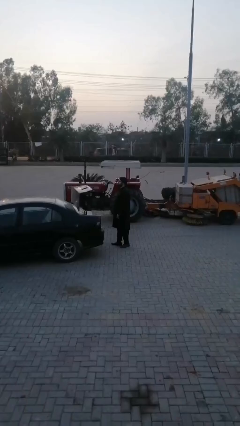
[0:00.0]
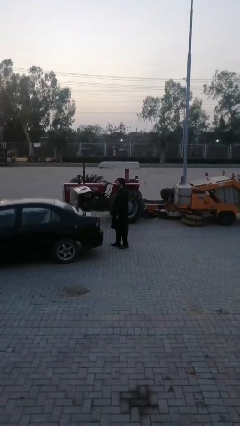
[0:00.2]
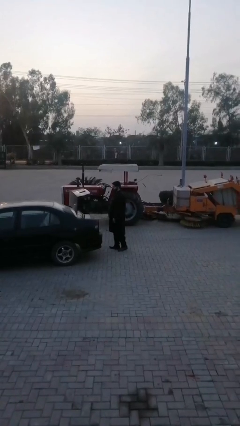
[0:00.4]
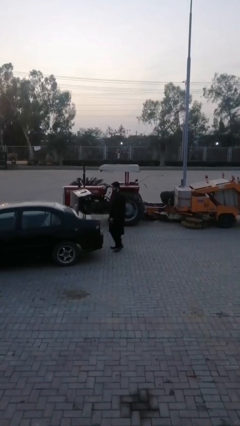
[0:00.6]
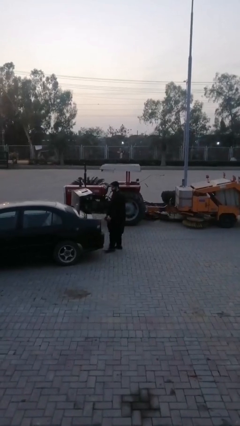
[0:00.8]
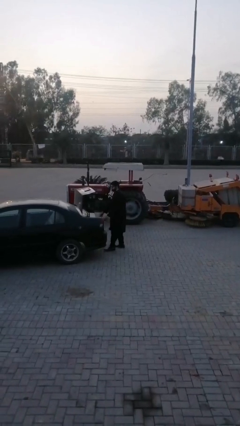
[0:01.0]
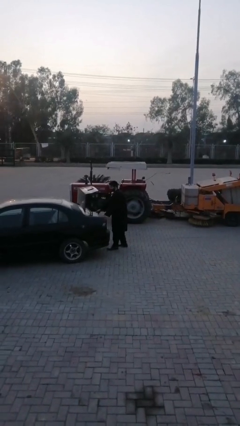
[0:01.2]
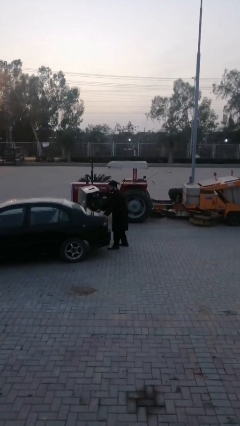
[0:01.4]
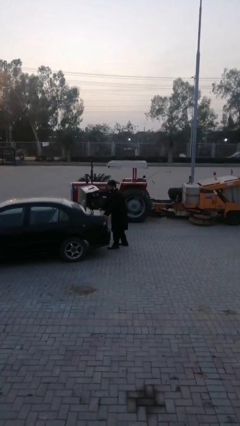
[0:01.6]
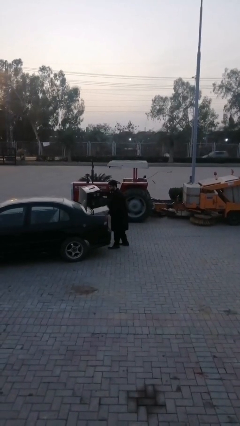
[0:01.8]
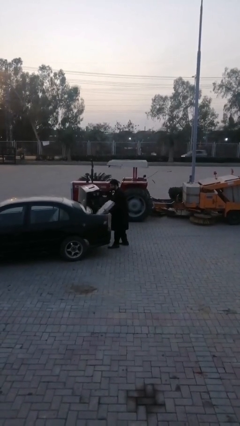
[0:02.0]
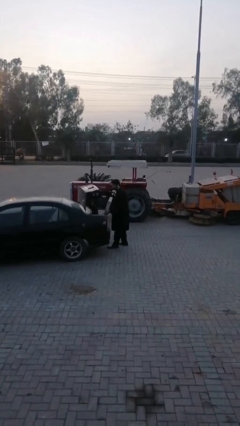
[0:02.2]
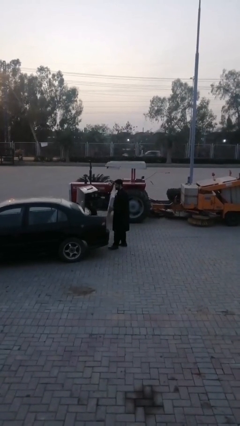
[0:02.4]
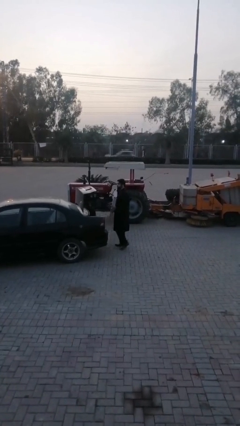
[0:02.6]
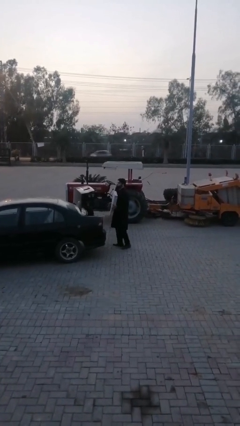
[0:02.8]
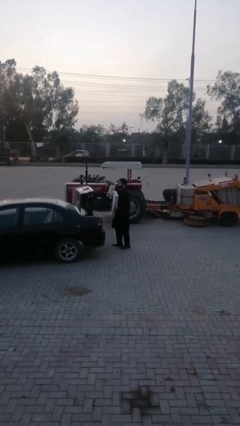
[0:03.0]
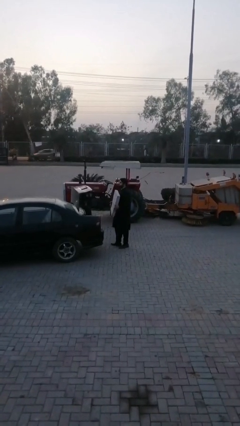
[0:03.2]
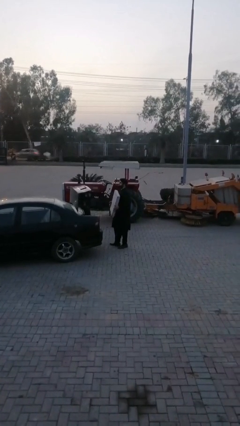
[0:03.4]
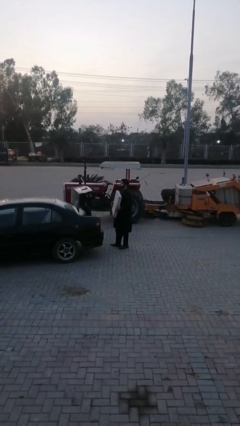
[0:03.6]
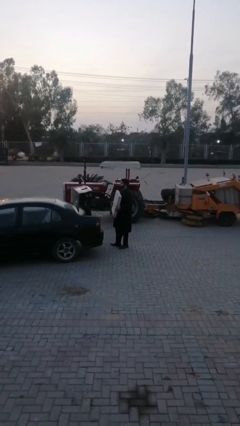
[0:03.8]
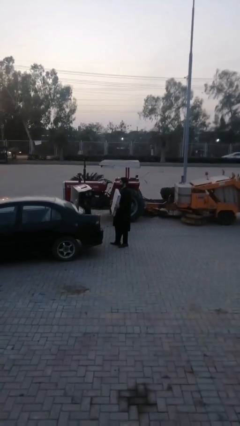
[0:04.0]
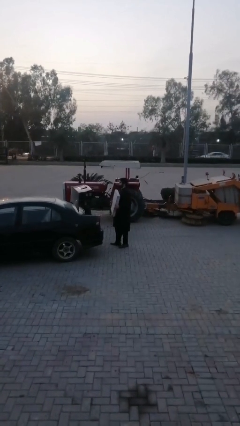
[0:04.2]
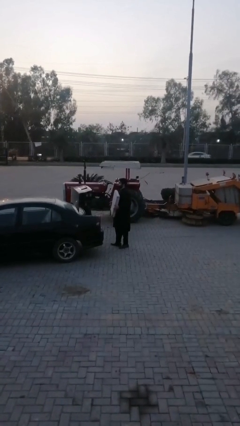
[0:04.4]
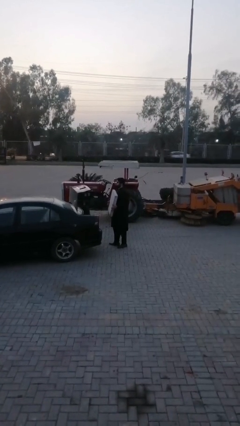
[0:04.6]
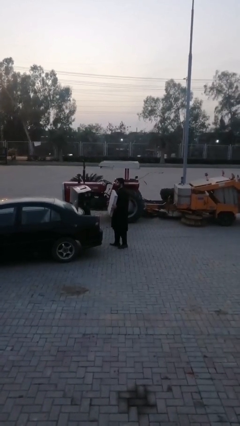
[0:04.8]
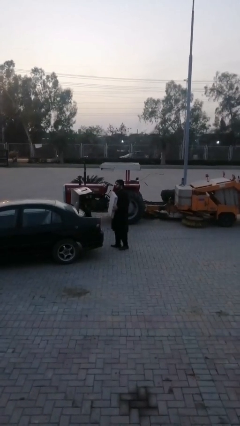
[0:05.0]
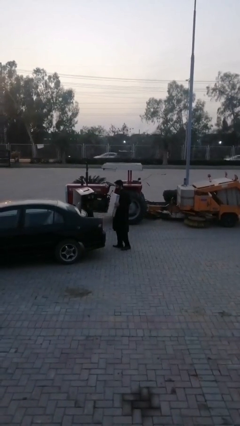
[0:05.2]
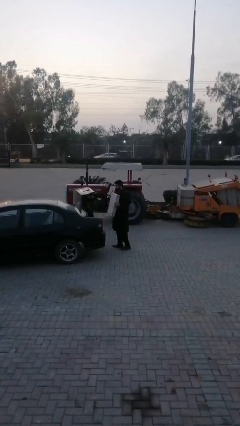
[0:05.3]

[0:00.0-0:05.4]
person unloads car

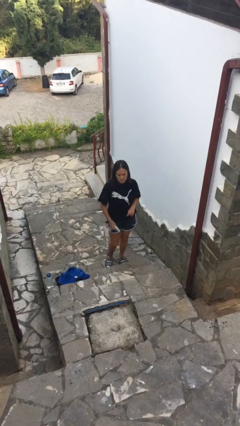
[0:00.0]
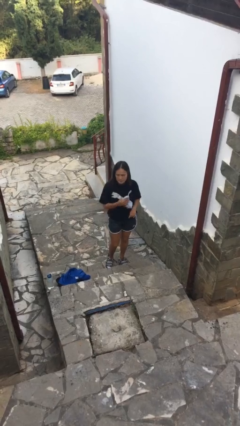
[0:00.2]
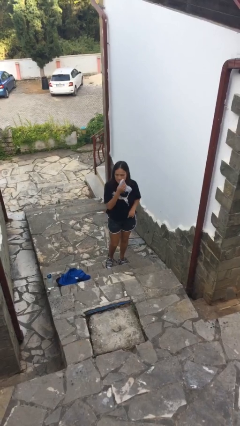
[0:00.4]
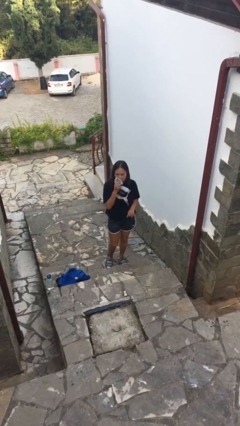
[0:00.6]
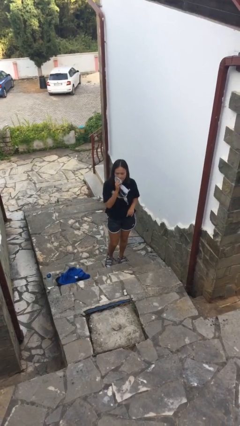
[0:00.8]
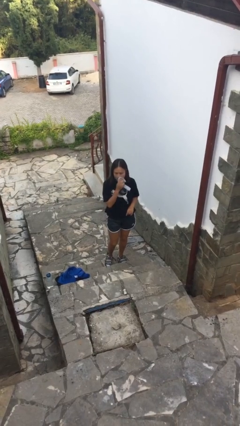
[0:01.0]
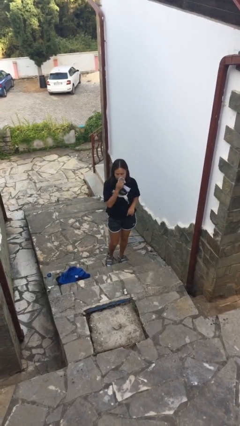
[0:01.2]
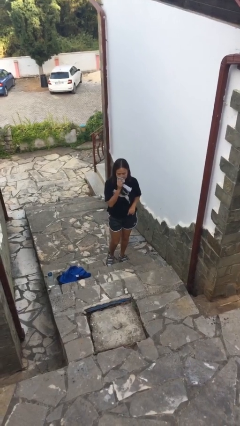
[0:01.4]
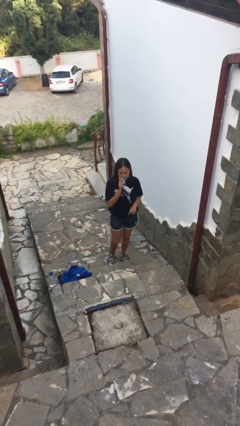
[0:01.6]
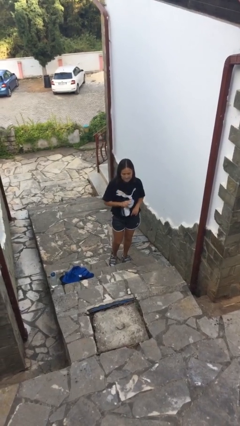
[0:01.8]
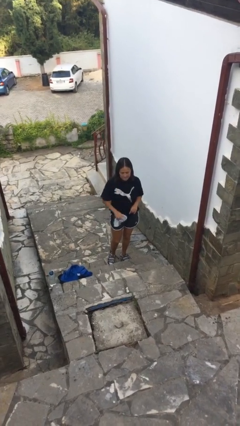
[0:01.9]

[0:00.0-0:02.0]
person wipes mouth with napkin

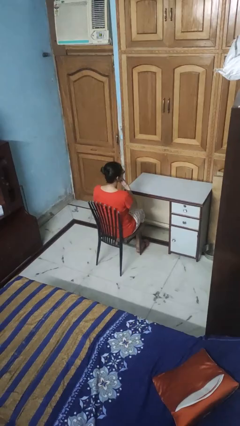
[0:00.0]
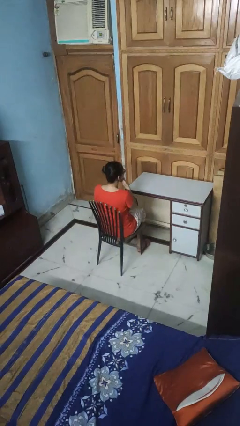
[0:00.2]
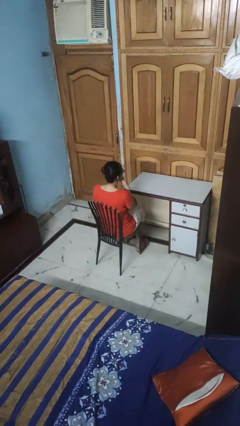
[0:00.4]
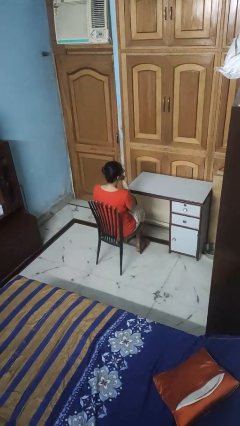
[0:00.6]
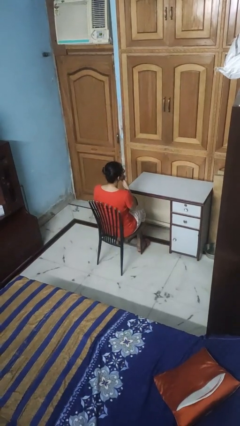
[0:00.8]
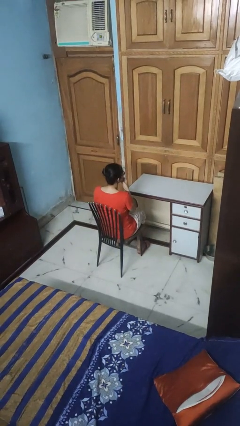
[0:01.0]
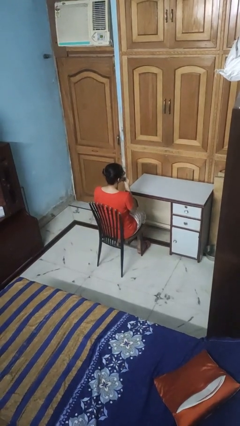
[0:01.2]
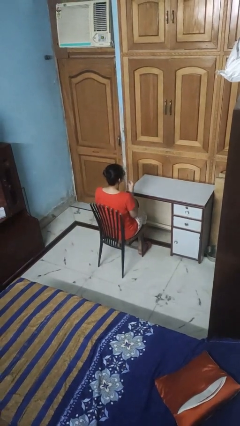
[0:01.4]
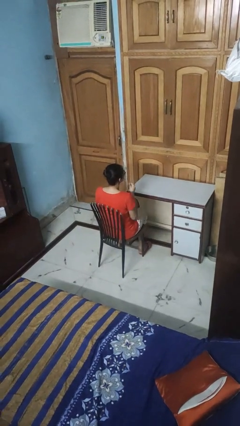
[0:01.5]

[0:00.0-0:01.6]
person strokes chin

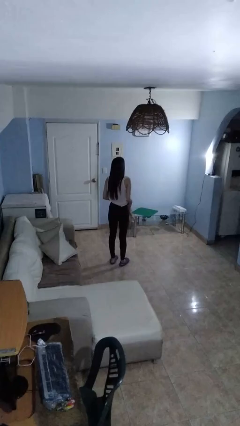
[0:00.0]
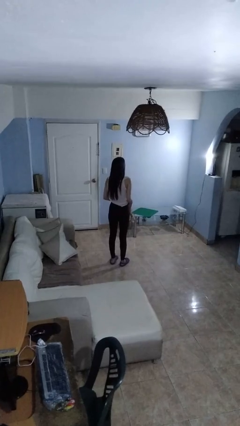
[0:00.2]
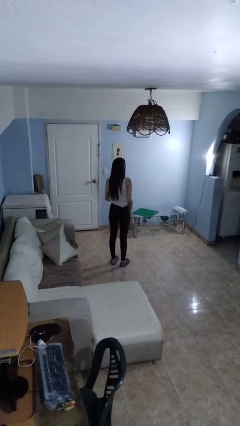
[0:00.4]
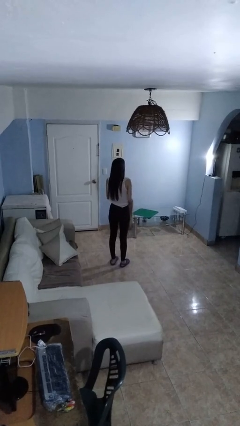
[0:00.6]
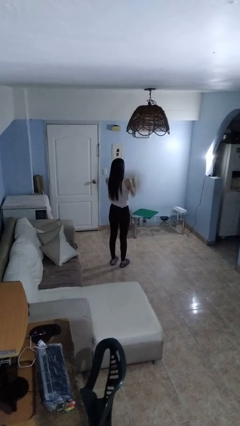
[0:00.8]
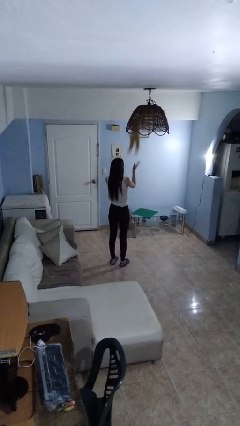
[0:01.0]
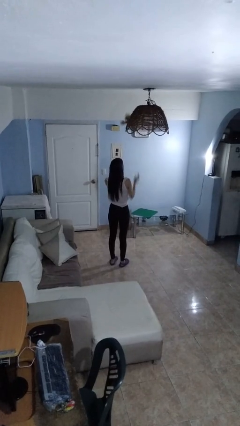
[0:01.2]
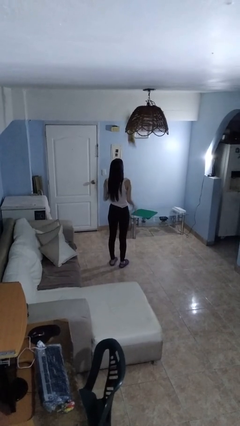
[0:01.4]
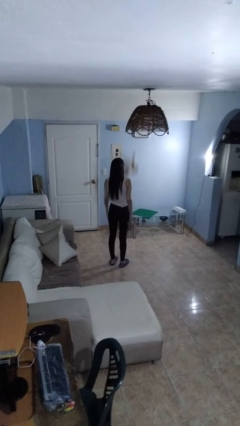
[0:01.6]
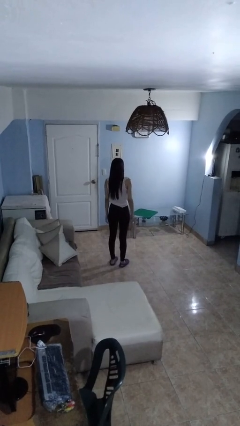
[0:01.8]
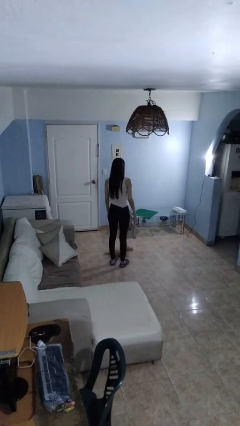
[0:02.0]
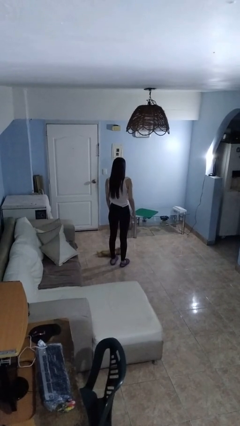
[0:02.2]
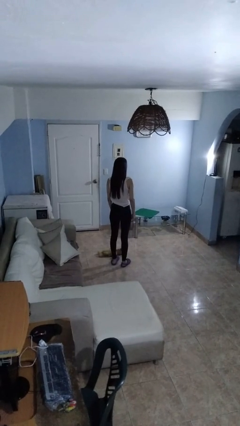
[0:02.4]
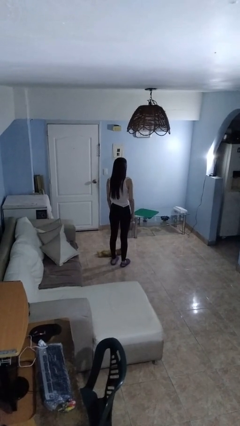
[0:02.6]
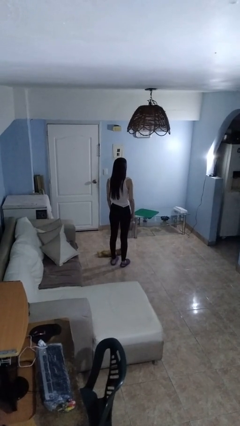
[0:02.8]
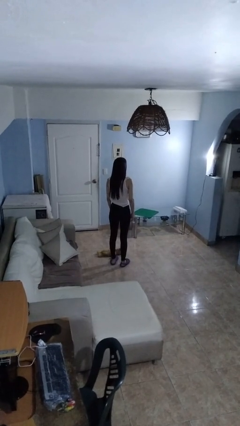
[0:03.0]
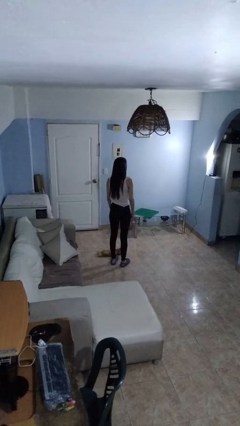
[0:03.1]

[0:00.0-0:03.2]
person throws object into air

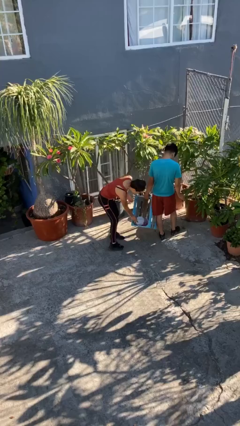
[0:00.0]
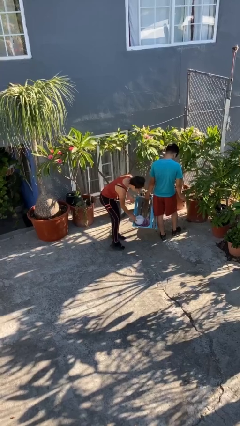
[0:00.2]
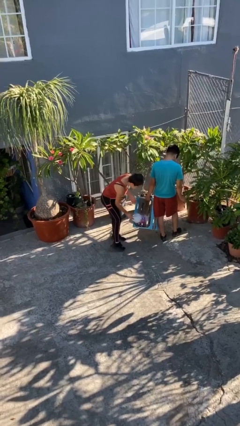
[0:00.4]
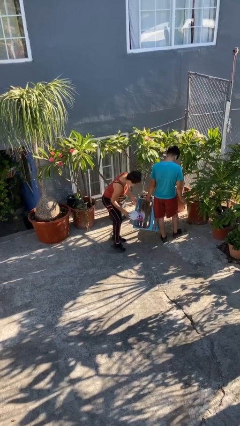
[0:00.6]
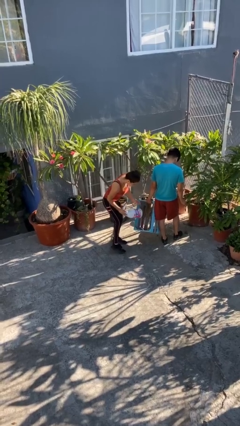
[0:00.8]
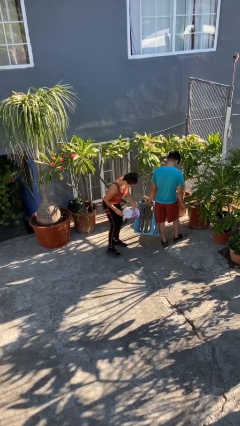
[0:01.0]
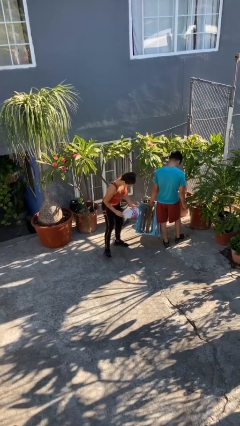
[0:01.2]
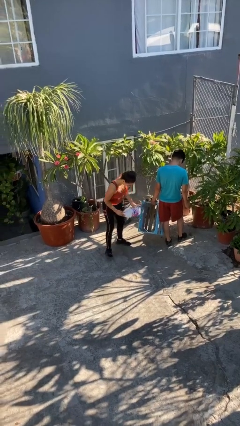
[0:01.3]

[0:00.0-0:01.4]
person steals object from person

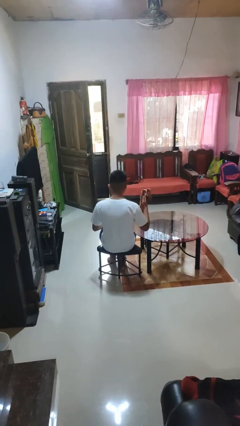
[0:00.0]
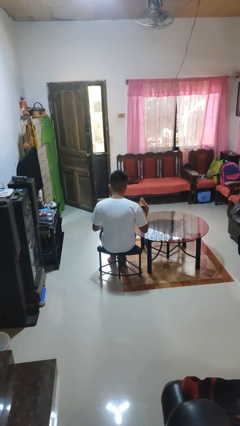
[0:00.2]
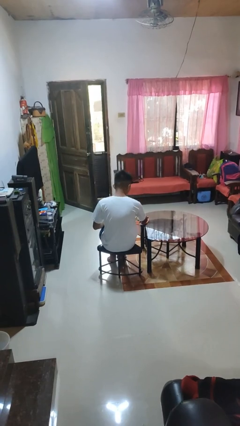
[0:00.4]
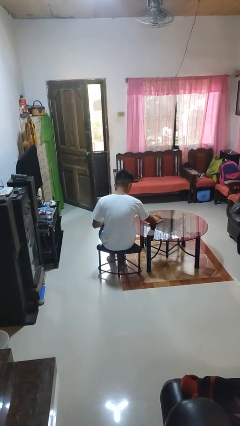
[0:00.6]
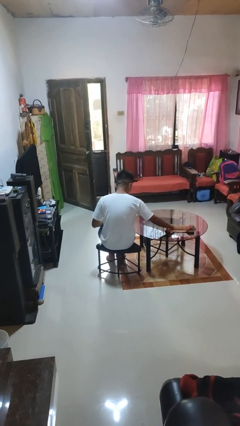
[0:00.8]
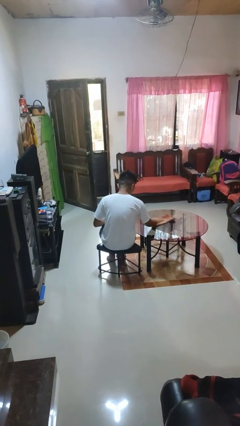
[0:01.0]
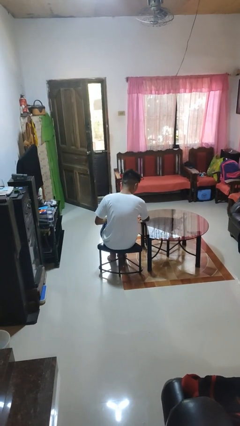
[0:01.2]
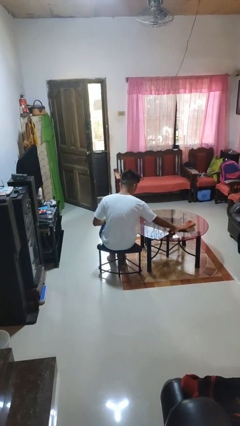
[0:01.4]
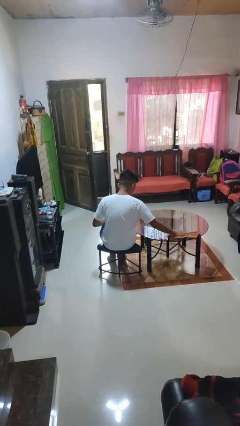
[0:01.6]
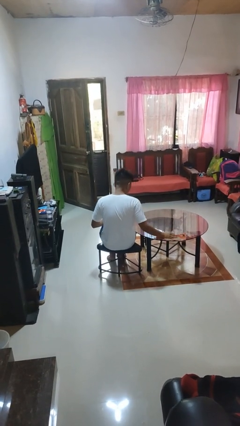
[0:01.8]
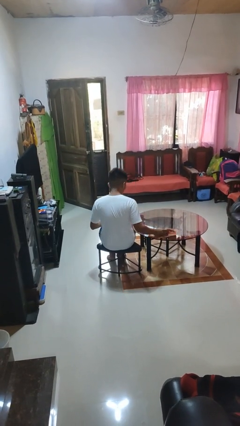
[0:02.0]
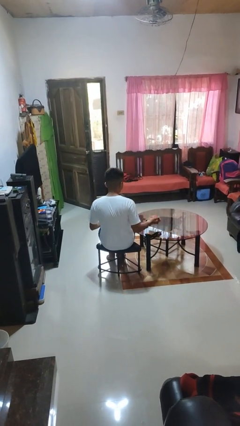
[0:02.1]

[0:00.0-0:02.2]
person cleans table with rag

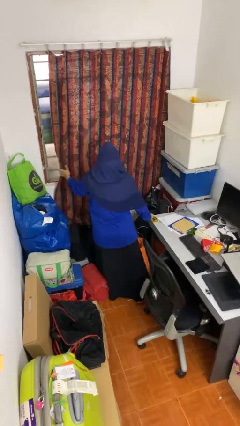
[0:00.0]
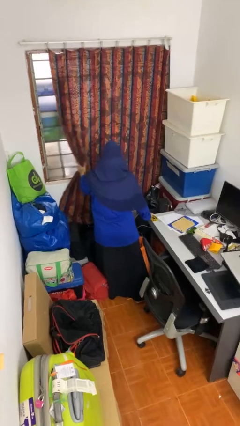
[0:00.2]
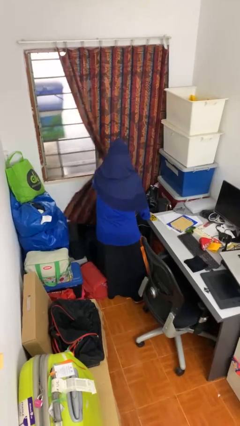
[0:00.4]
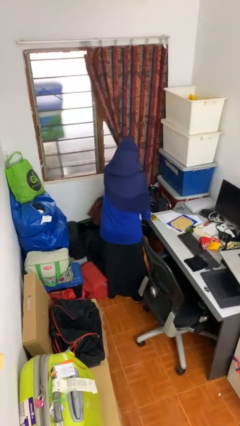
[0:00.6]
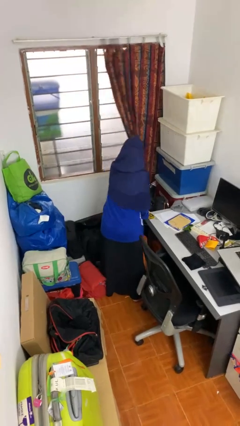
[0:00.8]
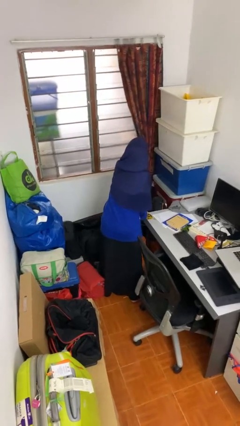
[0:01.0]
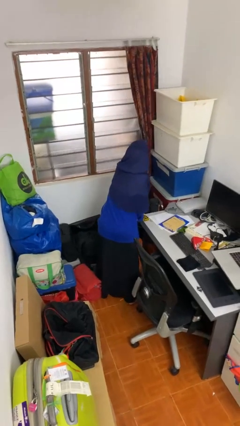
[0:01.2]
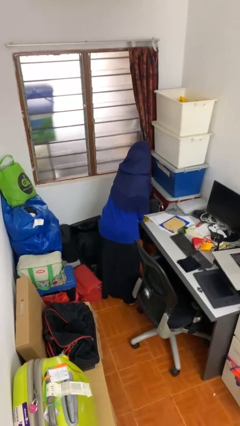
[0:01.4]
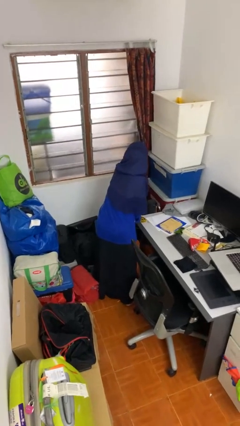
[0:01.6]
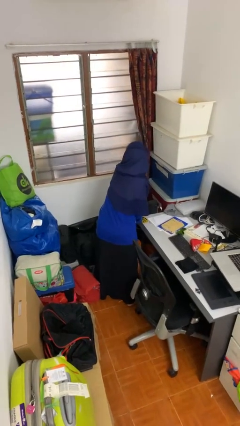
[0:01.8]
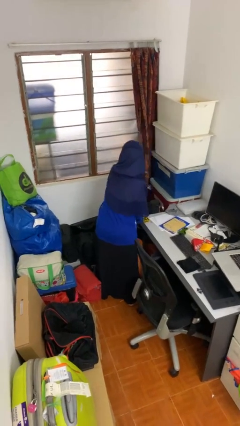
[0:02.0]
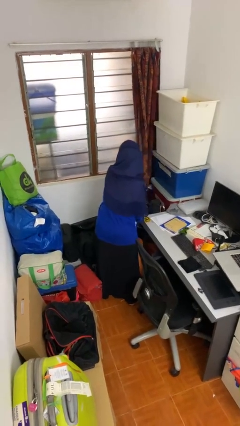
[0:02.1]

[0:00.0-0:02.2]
person opens curtains
